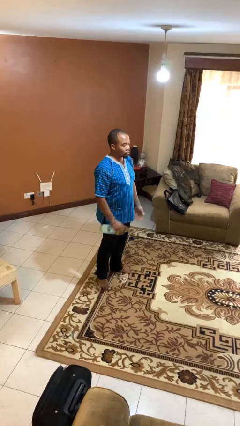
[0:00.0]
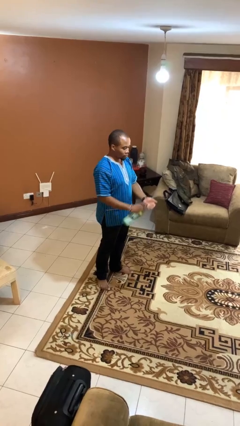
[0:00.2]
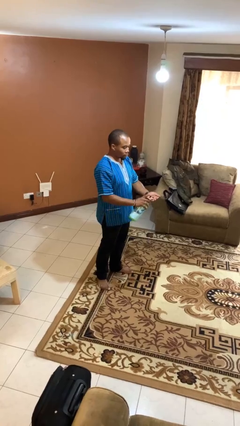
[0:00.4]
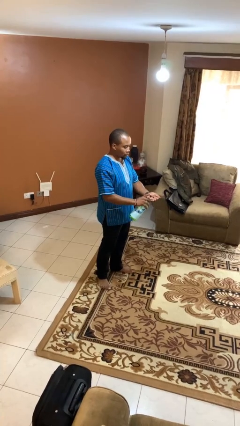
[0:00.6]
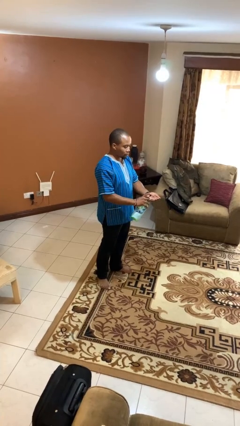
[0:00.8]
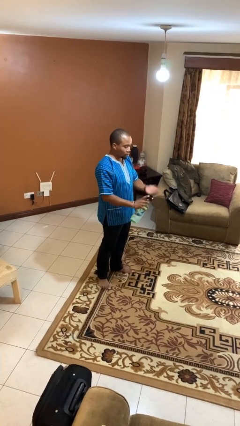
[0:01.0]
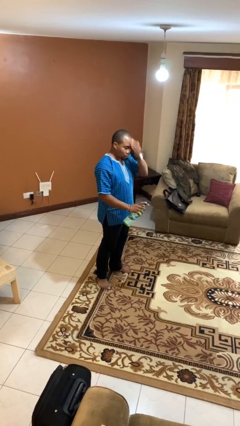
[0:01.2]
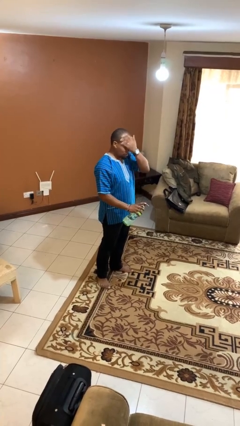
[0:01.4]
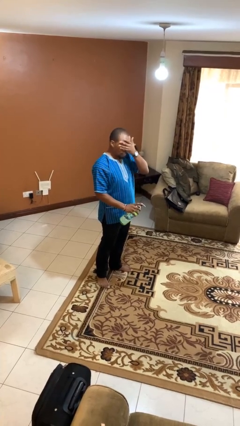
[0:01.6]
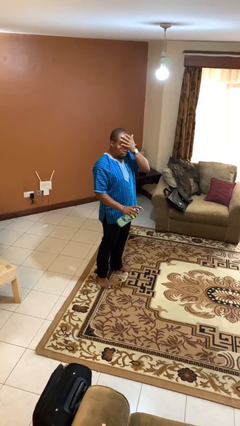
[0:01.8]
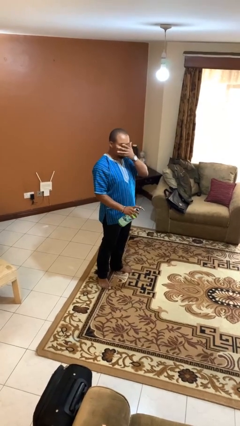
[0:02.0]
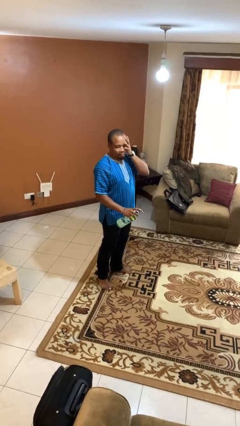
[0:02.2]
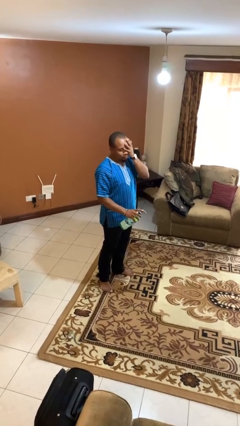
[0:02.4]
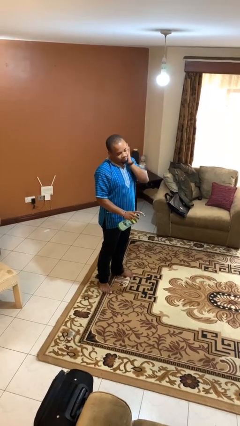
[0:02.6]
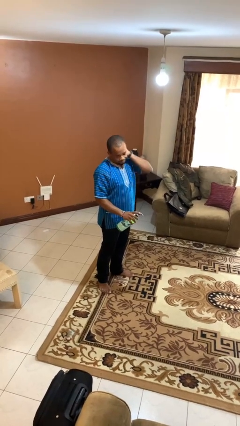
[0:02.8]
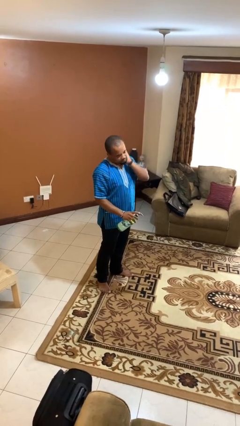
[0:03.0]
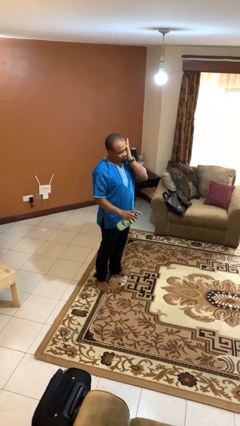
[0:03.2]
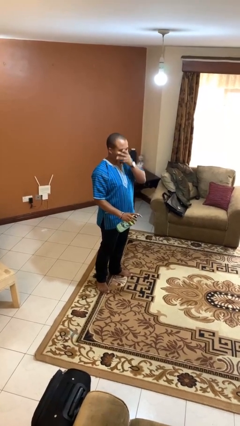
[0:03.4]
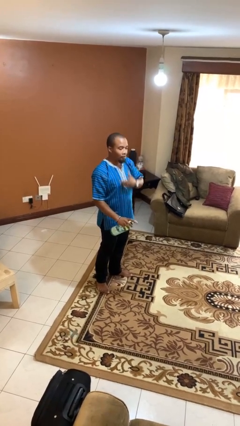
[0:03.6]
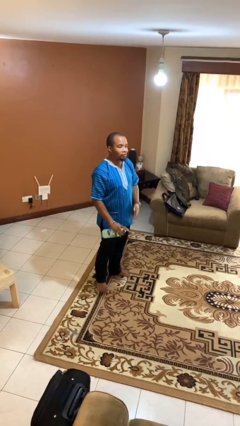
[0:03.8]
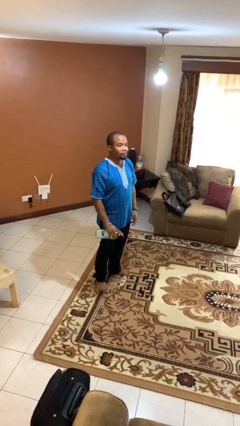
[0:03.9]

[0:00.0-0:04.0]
person applies sunscreen

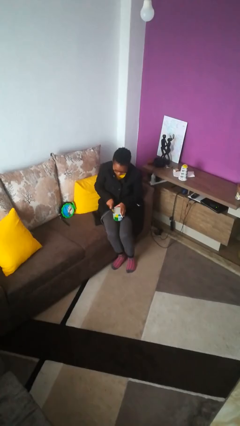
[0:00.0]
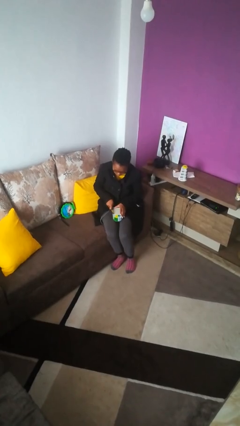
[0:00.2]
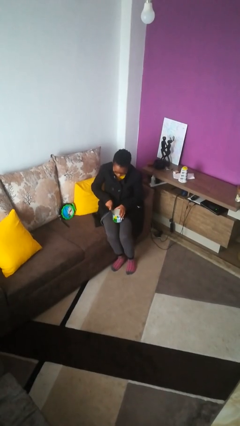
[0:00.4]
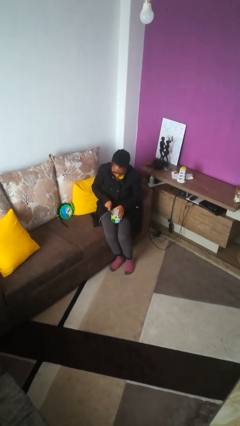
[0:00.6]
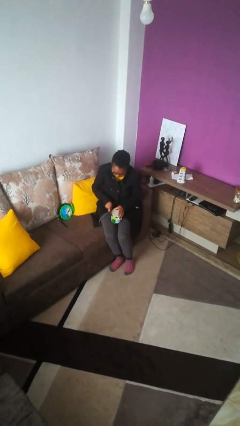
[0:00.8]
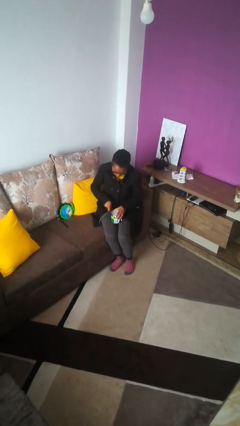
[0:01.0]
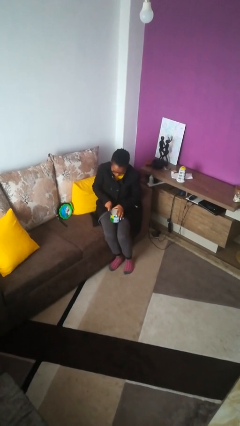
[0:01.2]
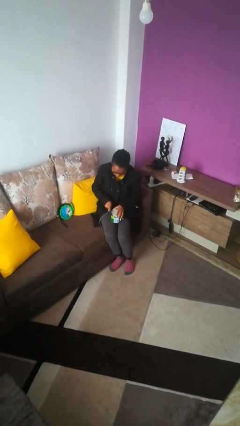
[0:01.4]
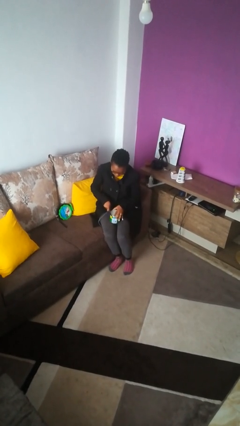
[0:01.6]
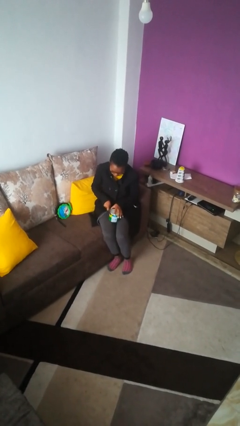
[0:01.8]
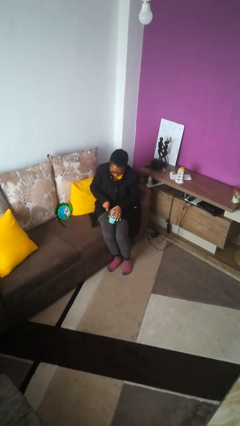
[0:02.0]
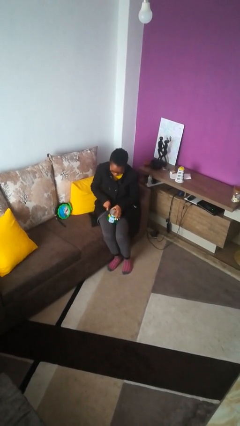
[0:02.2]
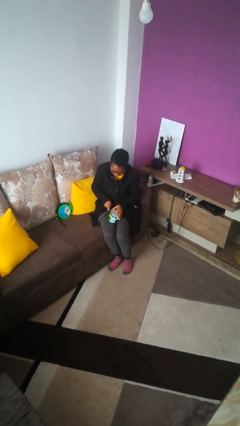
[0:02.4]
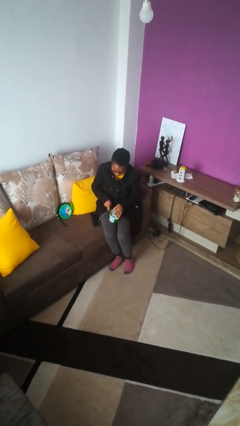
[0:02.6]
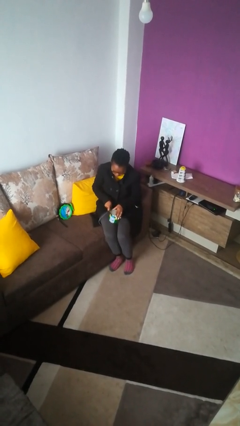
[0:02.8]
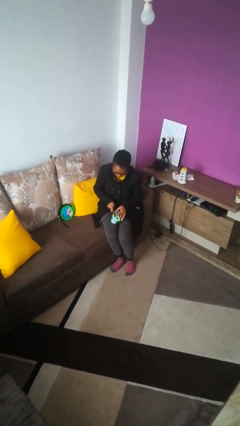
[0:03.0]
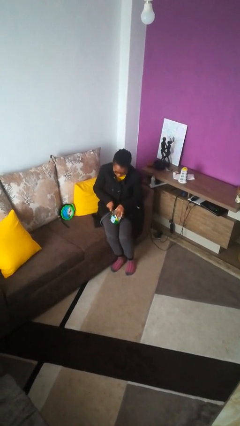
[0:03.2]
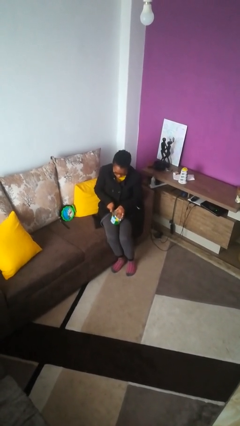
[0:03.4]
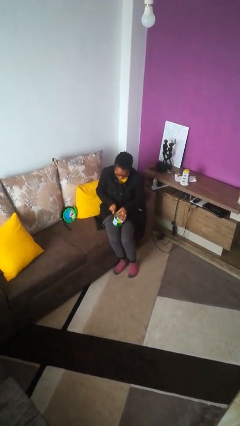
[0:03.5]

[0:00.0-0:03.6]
person opens can with can opener

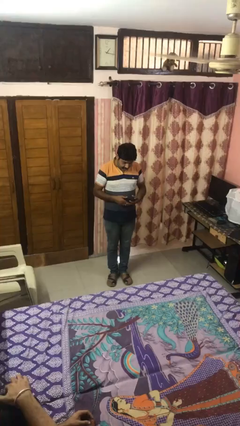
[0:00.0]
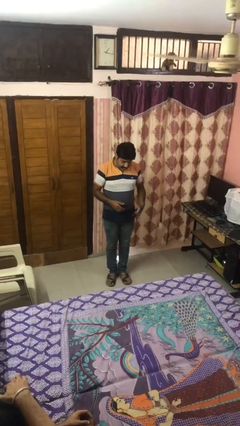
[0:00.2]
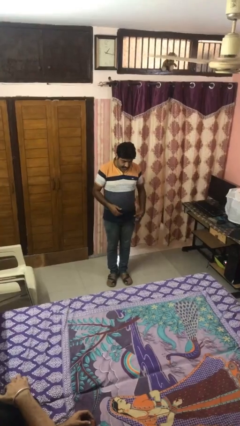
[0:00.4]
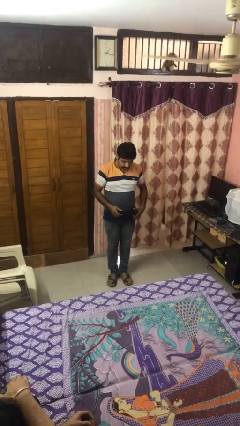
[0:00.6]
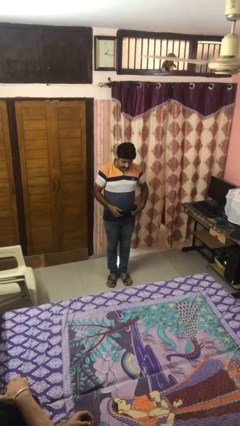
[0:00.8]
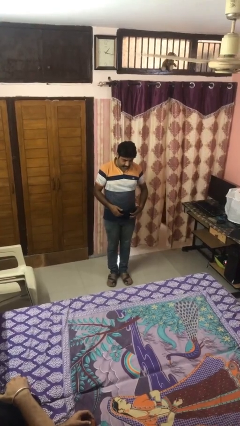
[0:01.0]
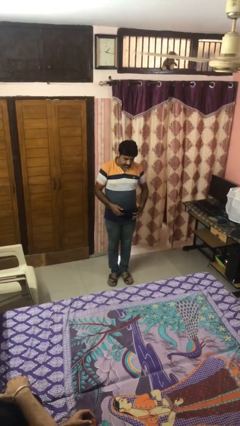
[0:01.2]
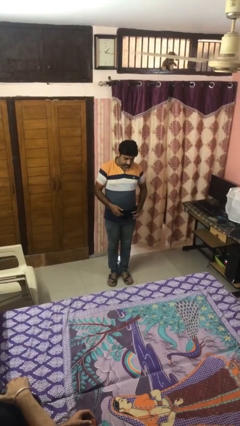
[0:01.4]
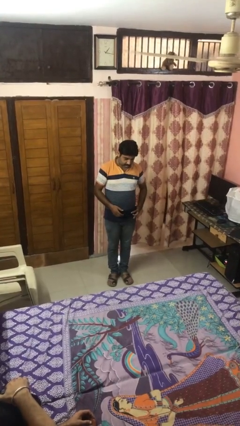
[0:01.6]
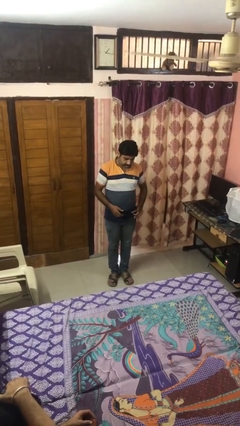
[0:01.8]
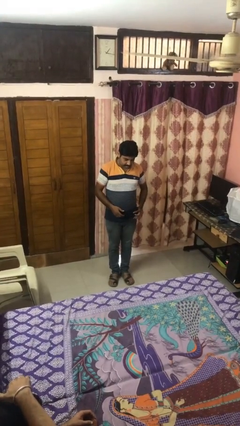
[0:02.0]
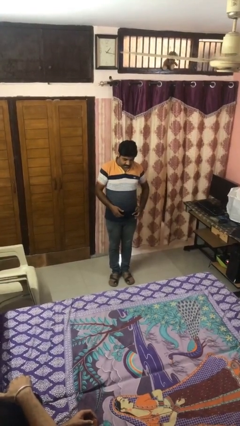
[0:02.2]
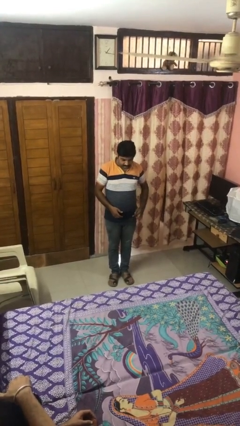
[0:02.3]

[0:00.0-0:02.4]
person puts phone into pocket

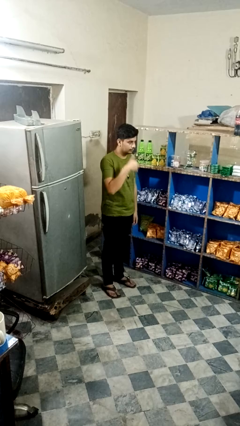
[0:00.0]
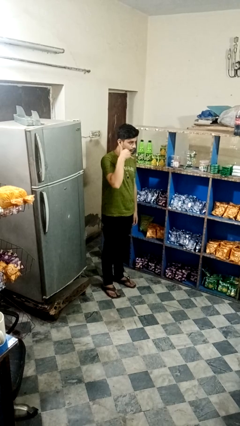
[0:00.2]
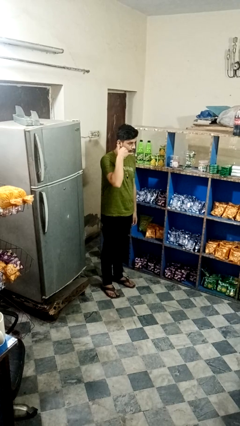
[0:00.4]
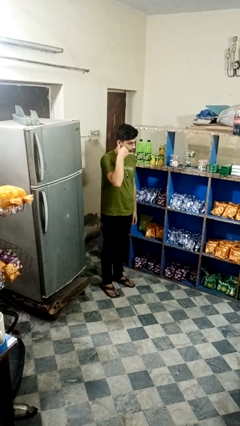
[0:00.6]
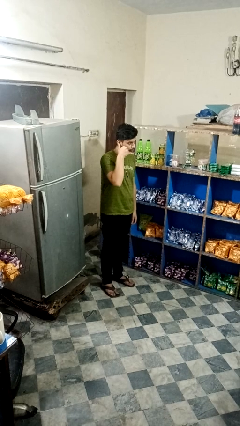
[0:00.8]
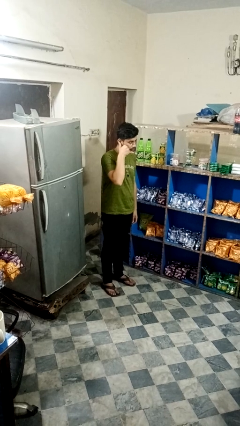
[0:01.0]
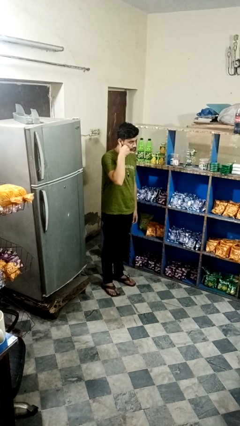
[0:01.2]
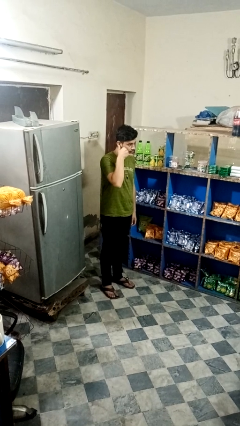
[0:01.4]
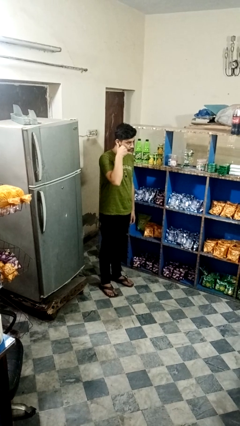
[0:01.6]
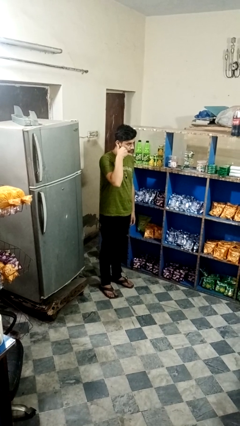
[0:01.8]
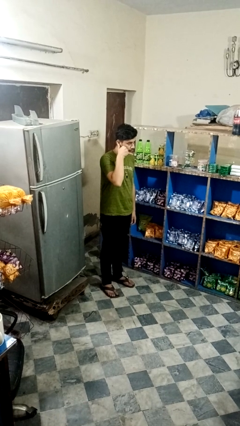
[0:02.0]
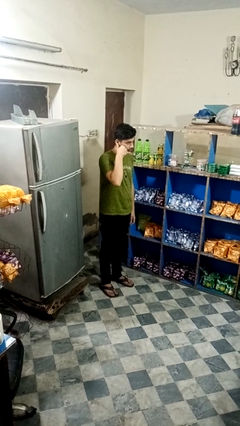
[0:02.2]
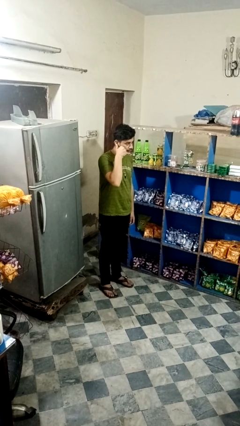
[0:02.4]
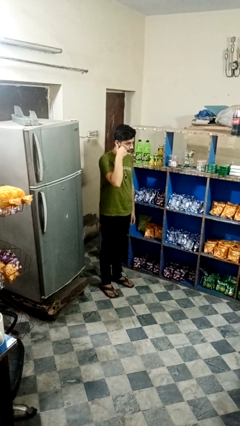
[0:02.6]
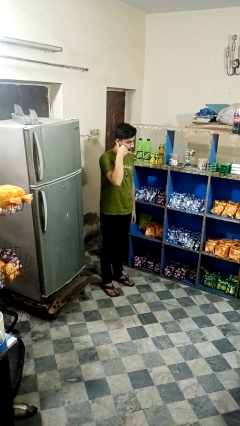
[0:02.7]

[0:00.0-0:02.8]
person gestures heart

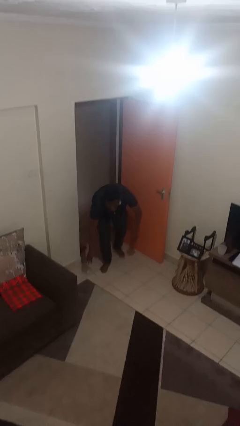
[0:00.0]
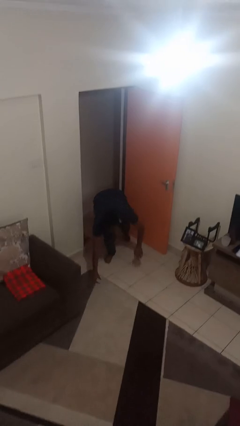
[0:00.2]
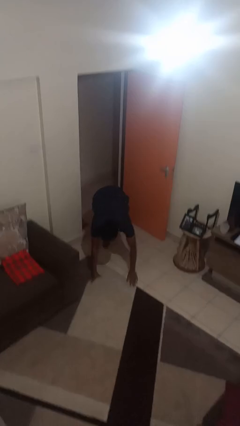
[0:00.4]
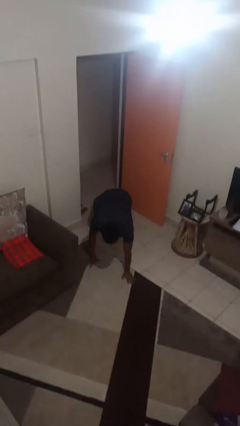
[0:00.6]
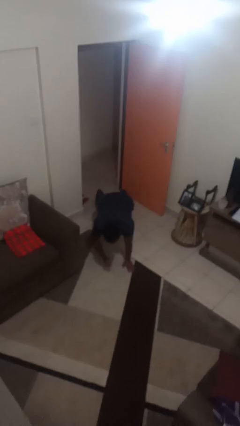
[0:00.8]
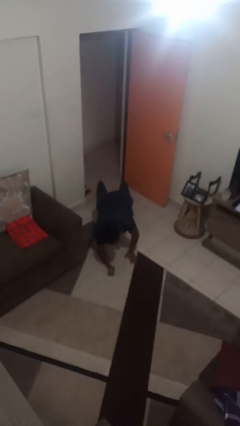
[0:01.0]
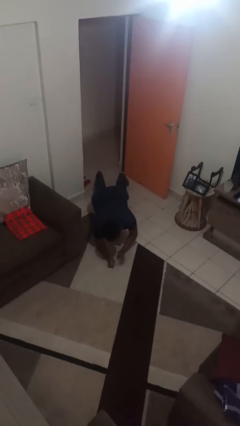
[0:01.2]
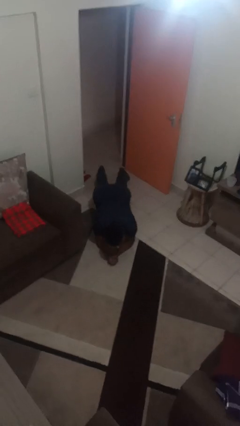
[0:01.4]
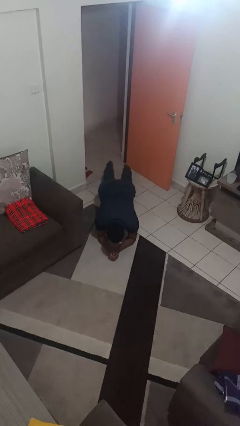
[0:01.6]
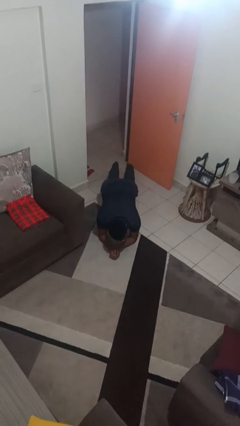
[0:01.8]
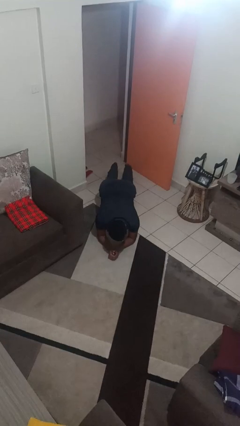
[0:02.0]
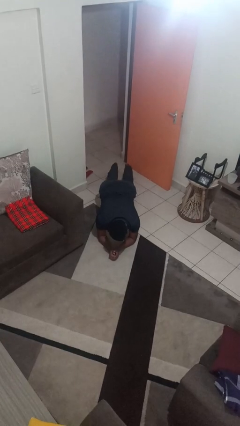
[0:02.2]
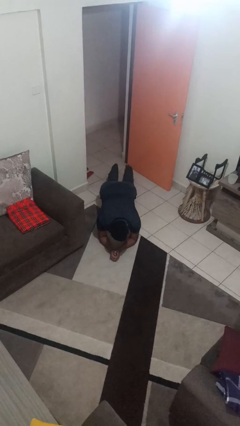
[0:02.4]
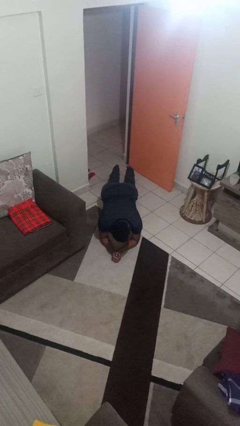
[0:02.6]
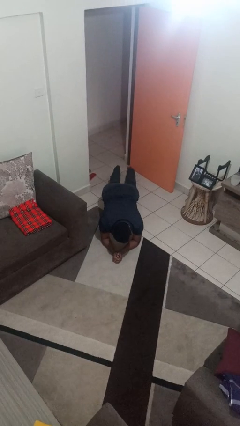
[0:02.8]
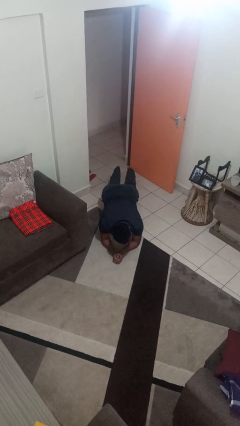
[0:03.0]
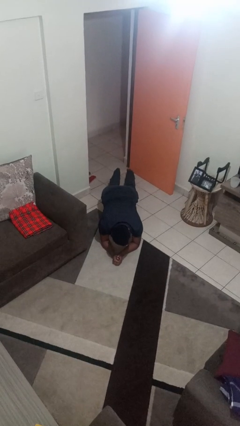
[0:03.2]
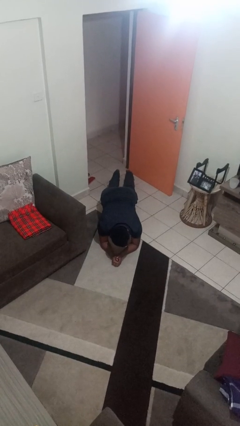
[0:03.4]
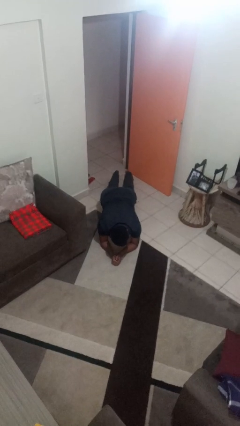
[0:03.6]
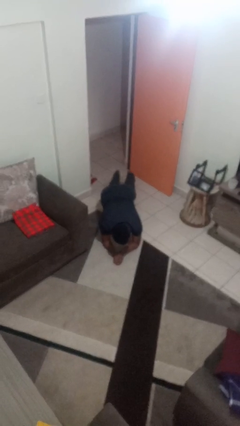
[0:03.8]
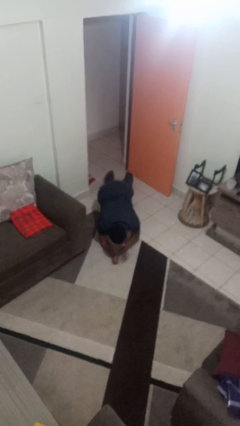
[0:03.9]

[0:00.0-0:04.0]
person exercises with plank

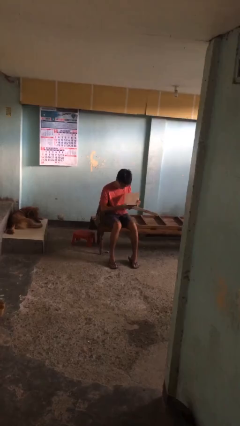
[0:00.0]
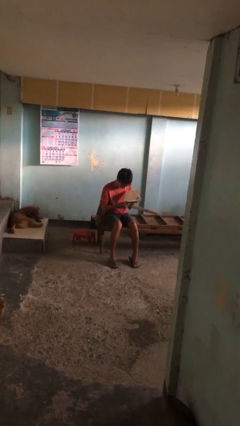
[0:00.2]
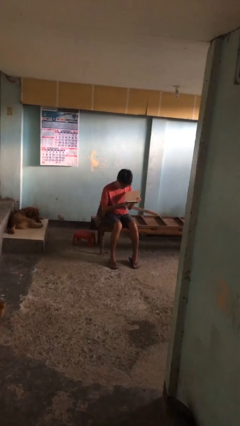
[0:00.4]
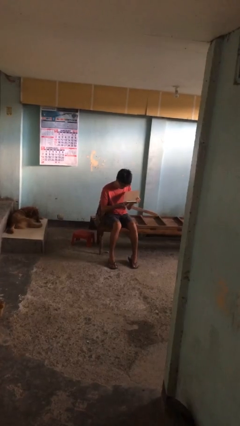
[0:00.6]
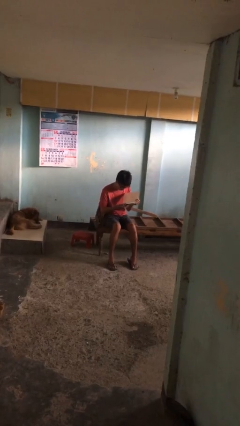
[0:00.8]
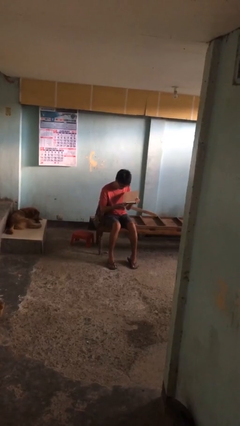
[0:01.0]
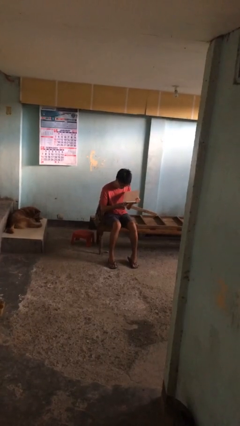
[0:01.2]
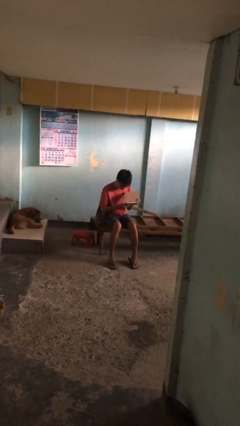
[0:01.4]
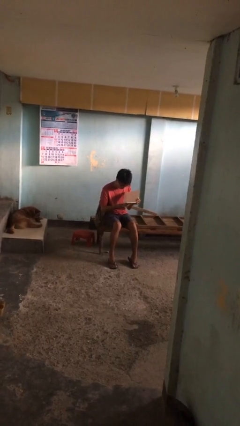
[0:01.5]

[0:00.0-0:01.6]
person reads document
